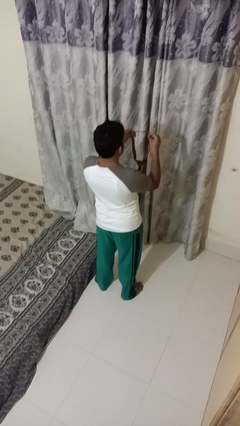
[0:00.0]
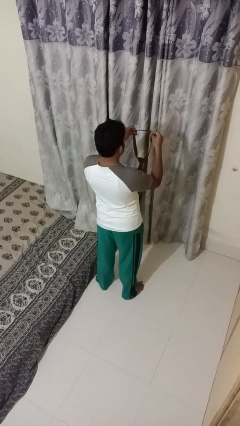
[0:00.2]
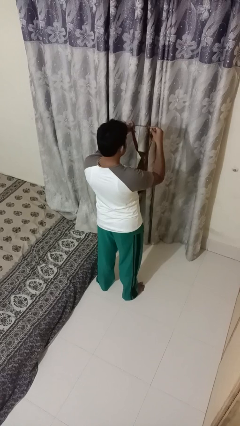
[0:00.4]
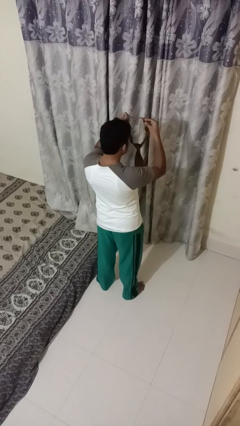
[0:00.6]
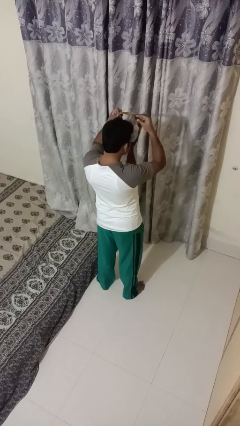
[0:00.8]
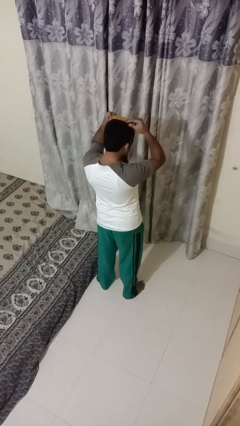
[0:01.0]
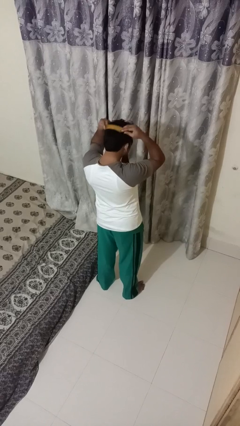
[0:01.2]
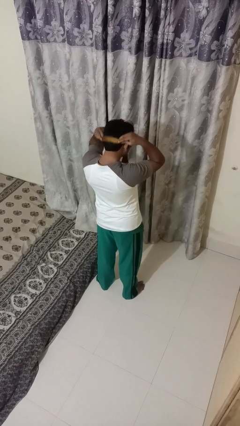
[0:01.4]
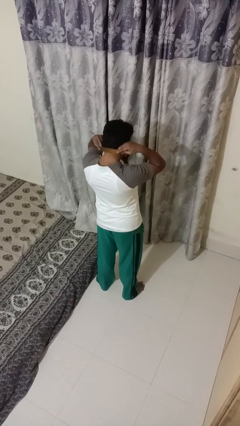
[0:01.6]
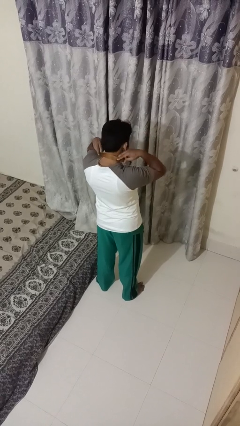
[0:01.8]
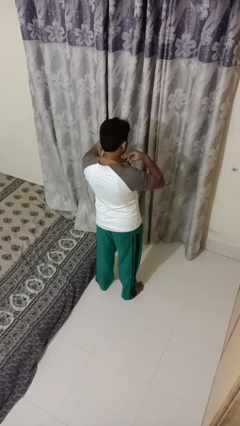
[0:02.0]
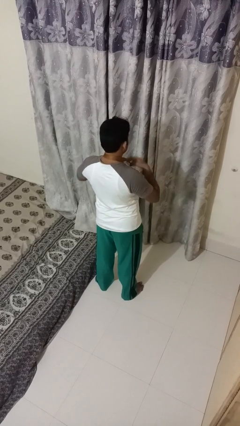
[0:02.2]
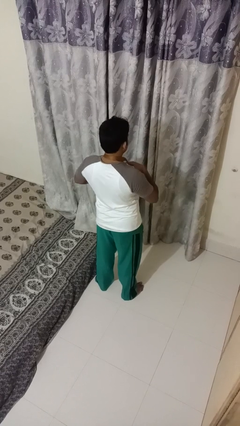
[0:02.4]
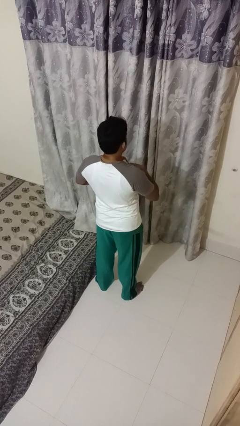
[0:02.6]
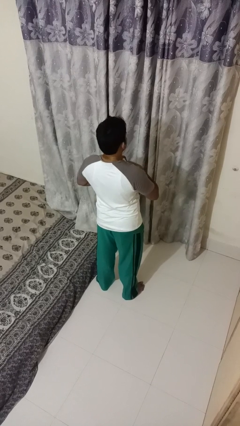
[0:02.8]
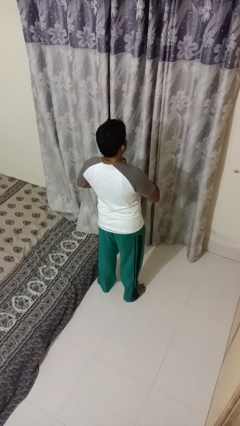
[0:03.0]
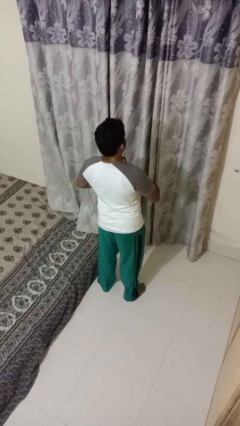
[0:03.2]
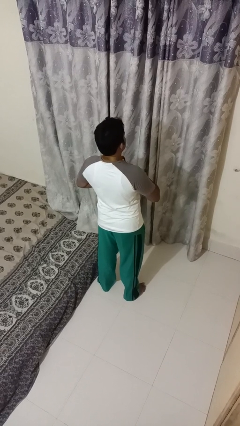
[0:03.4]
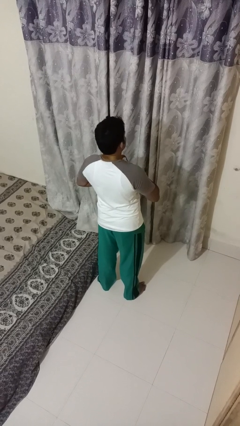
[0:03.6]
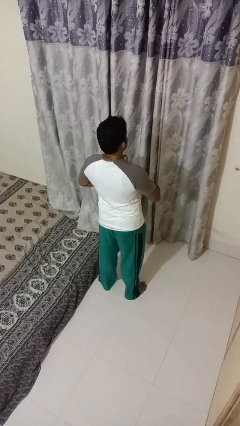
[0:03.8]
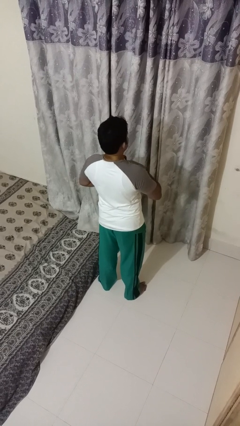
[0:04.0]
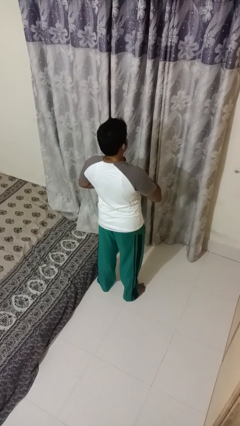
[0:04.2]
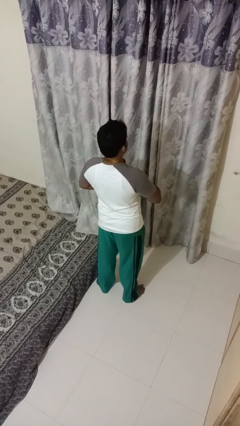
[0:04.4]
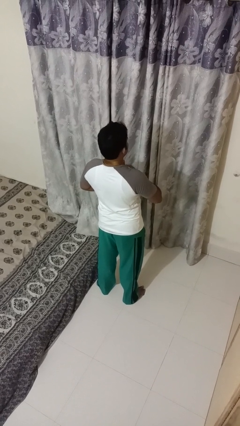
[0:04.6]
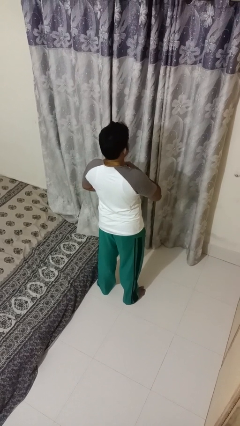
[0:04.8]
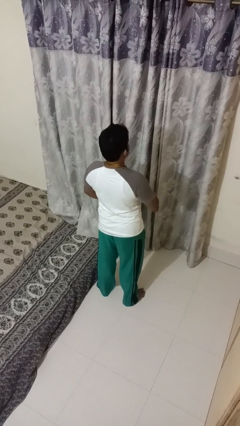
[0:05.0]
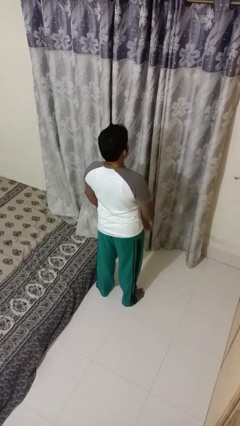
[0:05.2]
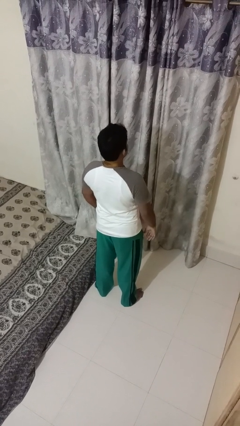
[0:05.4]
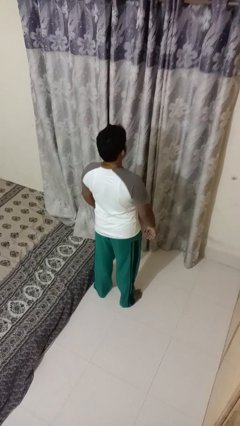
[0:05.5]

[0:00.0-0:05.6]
person puts on necktie

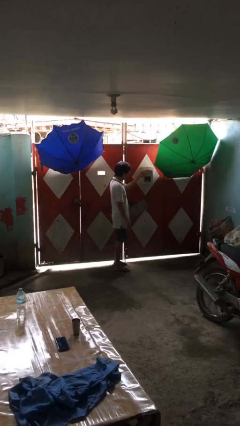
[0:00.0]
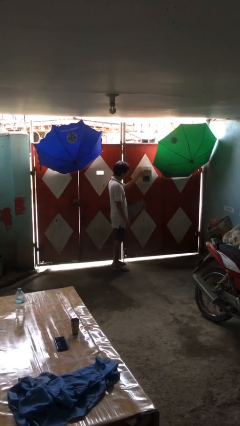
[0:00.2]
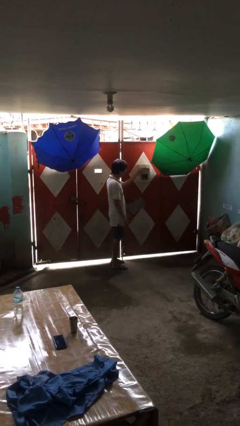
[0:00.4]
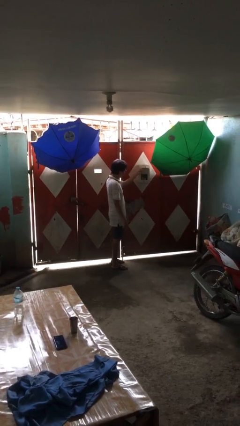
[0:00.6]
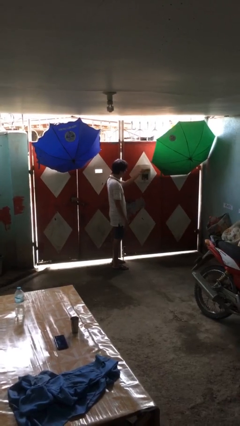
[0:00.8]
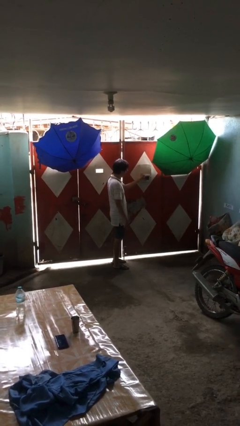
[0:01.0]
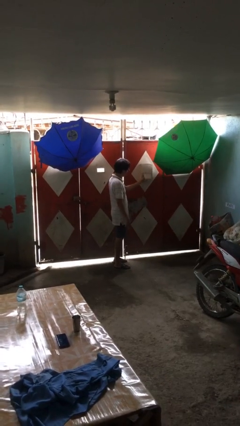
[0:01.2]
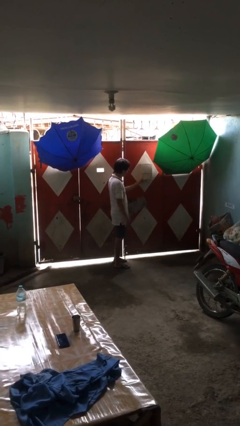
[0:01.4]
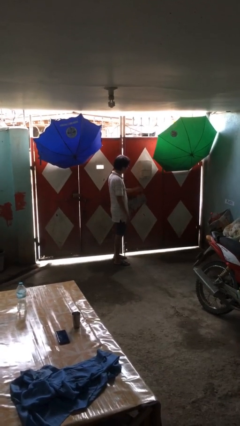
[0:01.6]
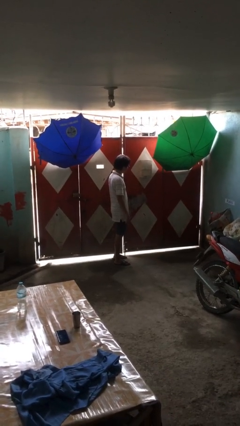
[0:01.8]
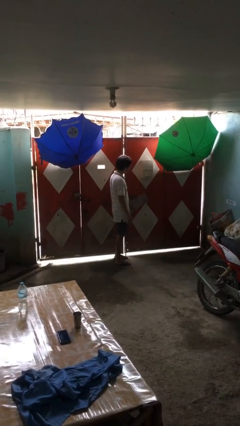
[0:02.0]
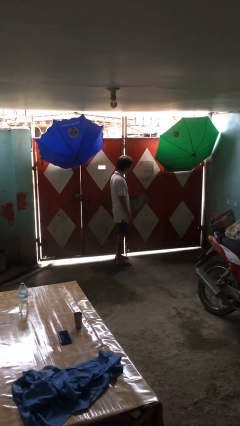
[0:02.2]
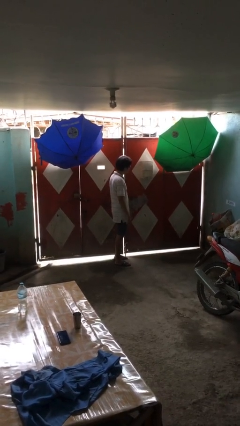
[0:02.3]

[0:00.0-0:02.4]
person closes mailbox

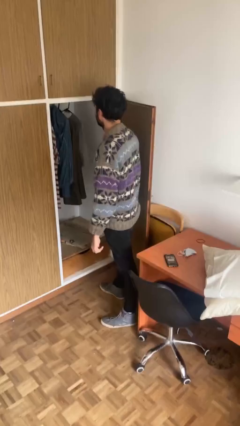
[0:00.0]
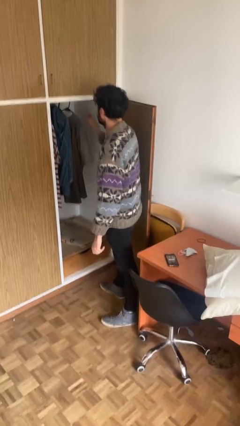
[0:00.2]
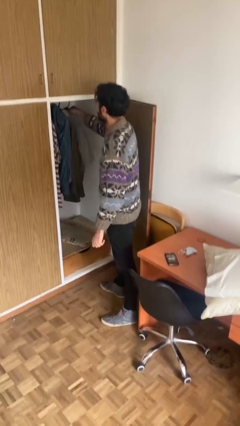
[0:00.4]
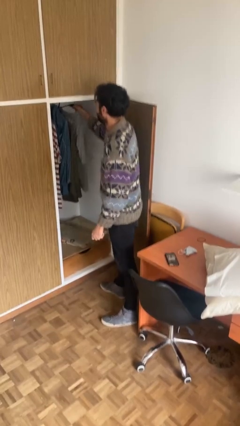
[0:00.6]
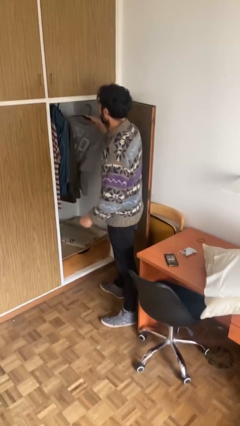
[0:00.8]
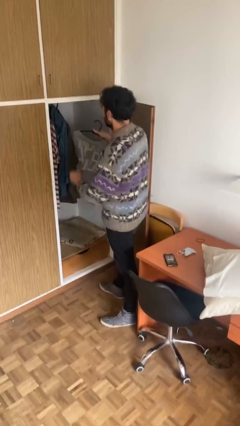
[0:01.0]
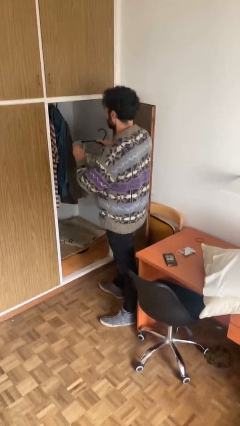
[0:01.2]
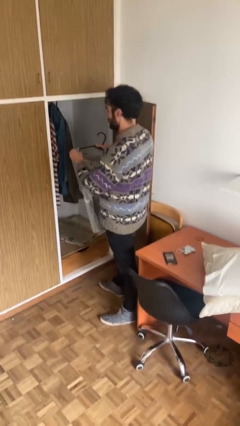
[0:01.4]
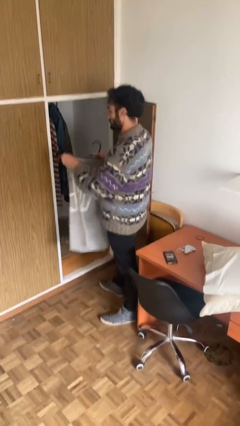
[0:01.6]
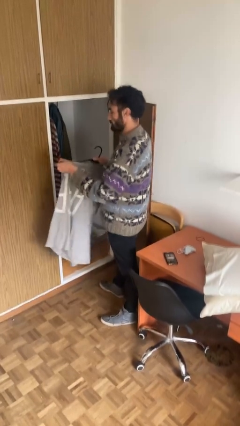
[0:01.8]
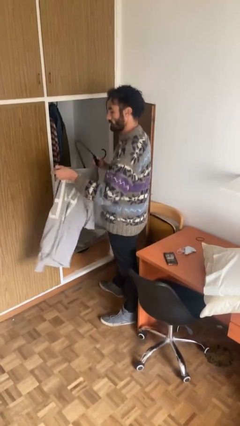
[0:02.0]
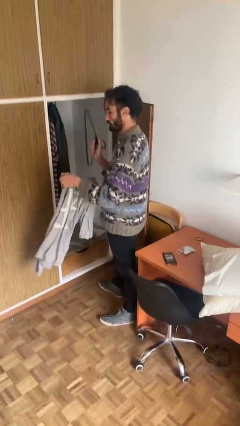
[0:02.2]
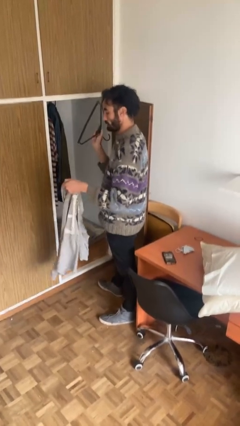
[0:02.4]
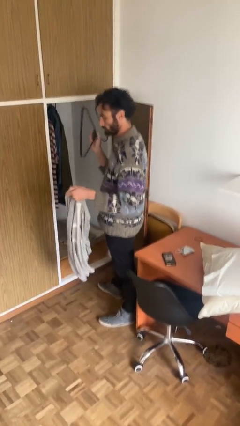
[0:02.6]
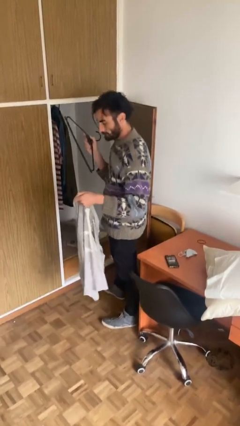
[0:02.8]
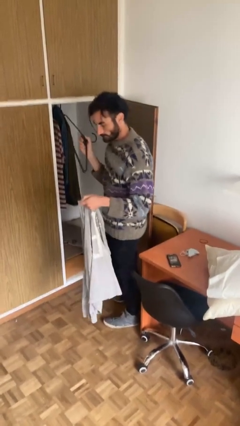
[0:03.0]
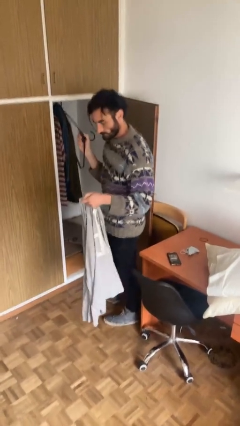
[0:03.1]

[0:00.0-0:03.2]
person takes clothes from closet

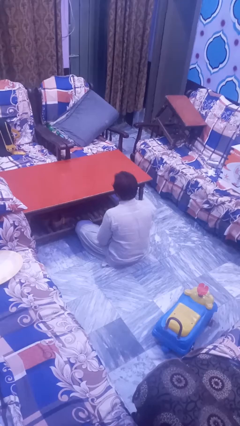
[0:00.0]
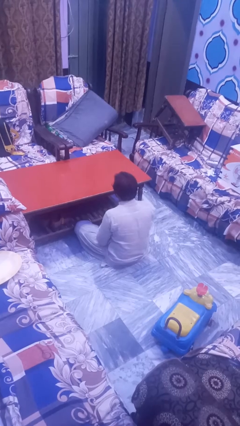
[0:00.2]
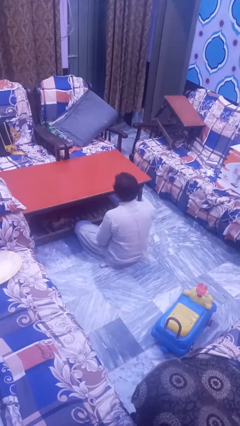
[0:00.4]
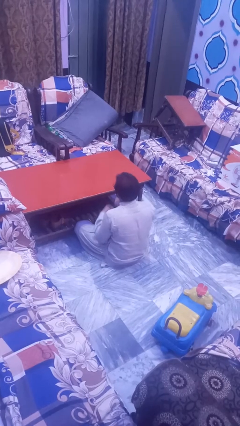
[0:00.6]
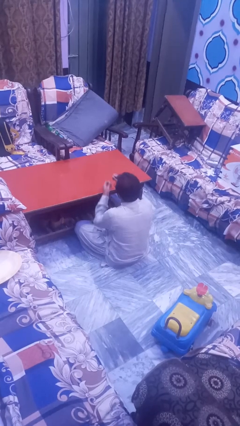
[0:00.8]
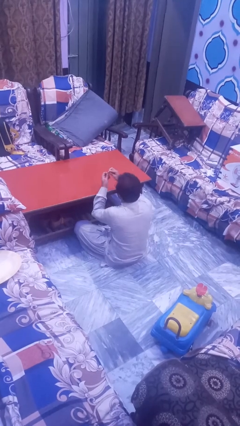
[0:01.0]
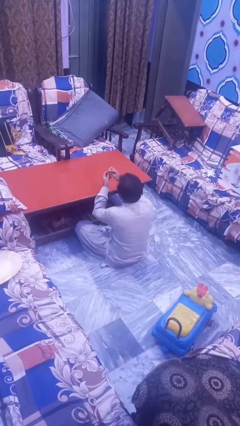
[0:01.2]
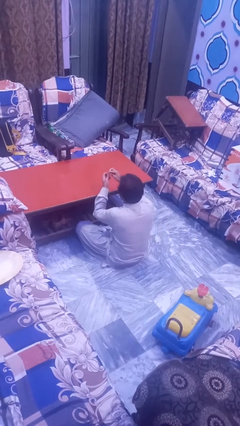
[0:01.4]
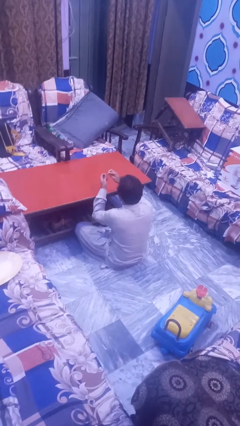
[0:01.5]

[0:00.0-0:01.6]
person files fingernails

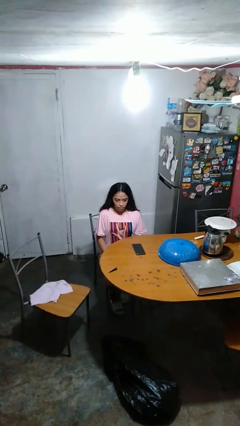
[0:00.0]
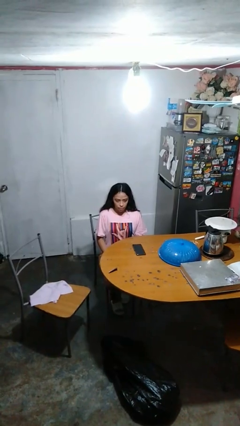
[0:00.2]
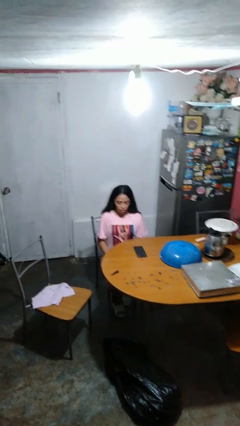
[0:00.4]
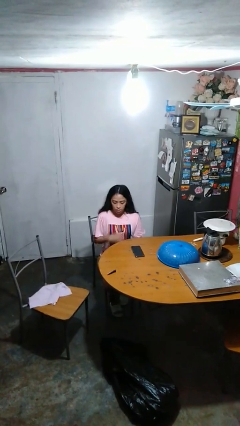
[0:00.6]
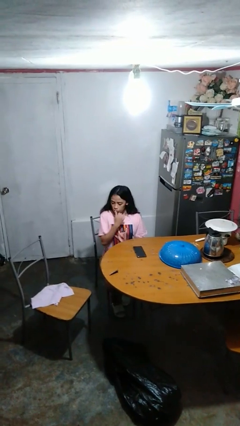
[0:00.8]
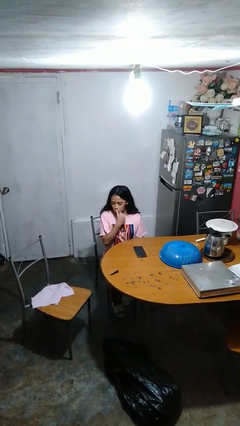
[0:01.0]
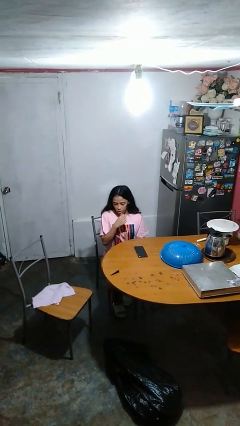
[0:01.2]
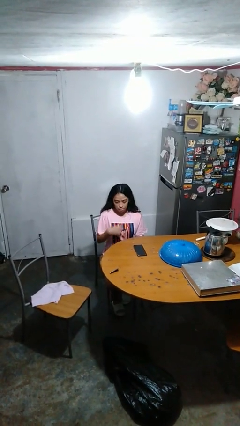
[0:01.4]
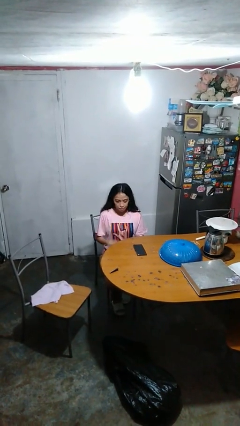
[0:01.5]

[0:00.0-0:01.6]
person licks fingers

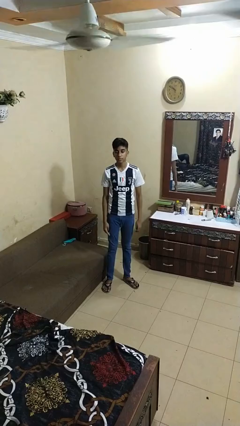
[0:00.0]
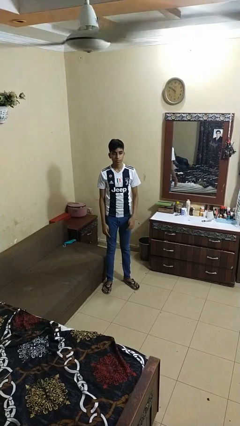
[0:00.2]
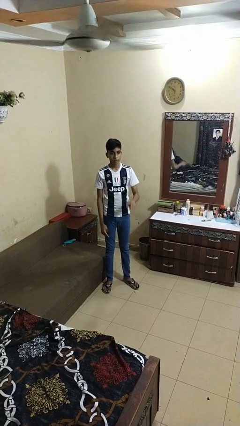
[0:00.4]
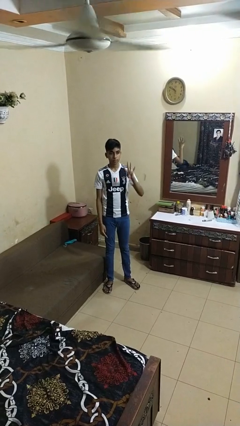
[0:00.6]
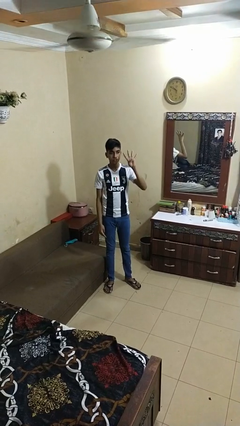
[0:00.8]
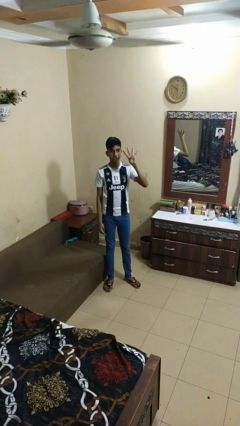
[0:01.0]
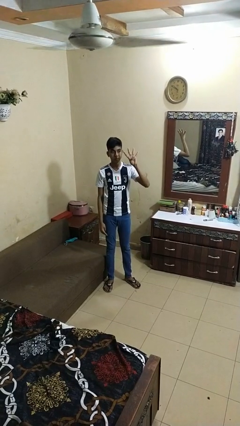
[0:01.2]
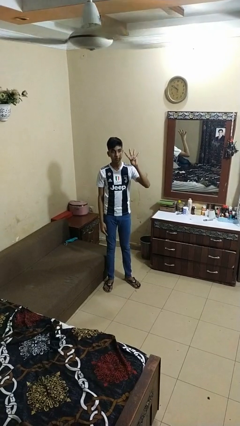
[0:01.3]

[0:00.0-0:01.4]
person gestures number four

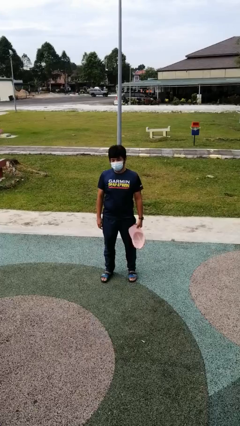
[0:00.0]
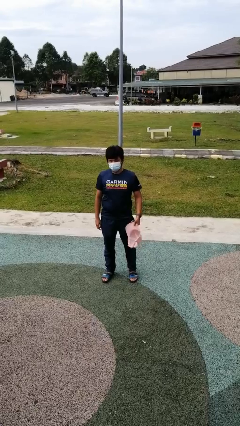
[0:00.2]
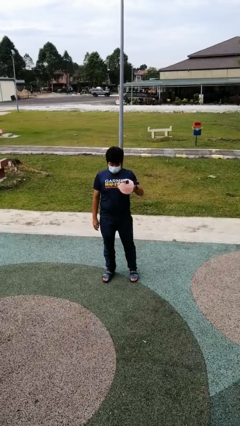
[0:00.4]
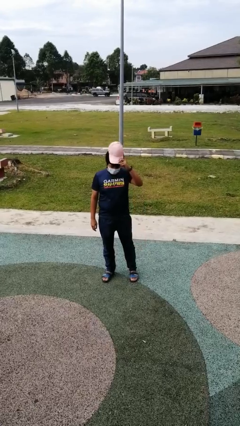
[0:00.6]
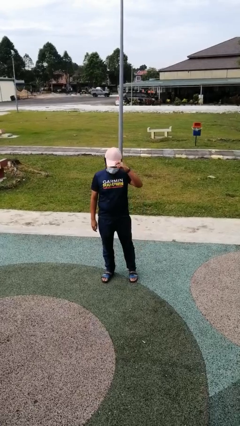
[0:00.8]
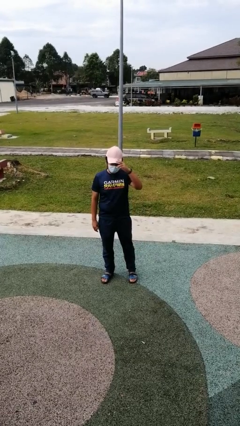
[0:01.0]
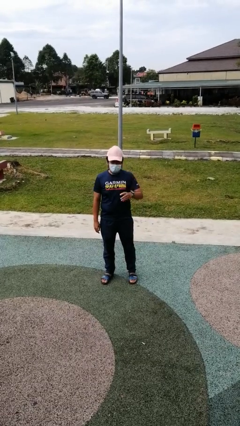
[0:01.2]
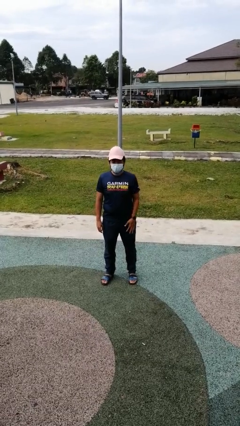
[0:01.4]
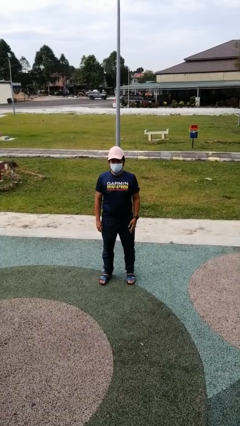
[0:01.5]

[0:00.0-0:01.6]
person puts on hat
